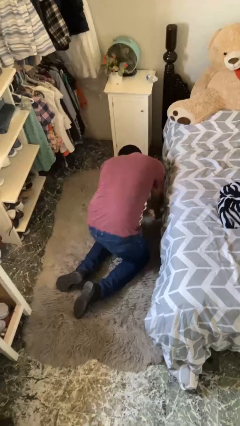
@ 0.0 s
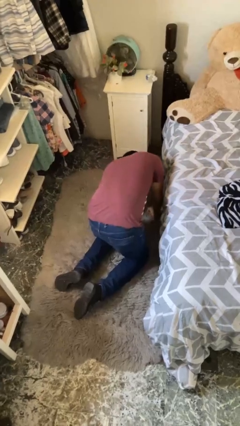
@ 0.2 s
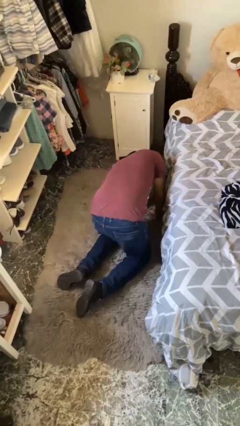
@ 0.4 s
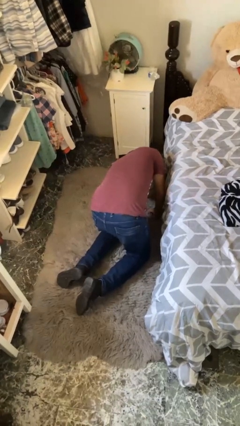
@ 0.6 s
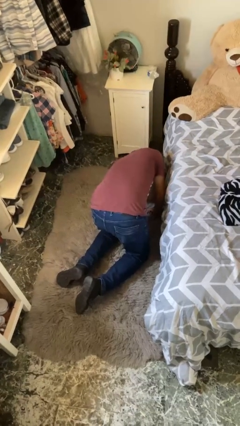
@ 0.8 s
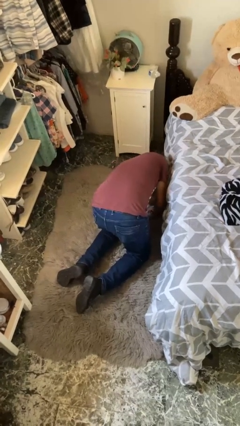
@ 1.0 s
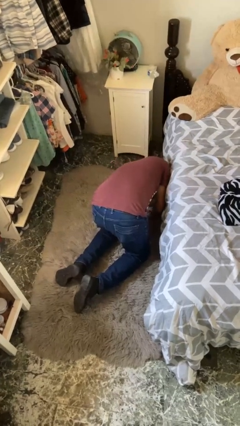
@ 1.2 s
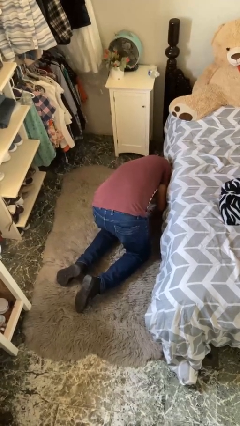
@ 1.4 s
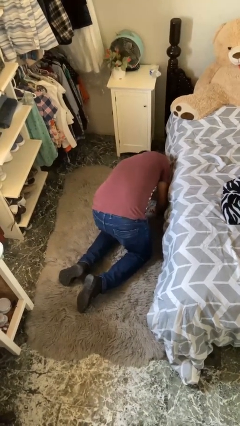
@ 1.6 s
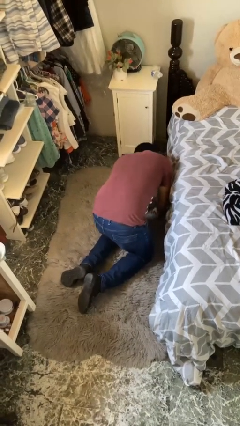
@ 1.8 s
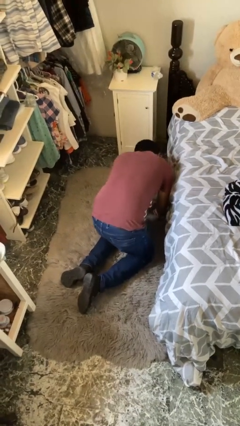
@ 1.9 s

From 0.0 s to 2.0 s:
person searches under bed

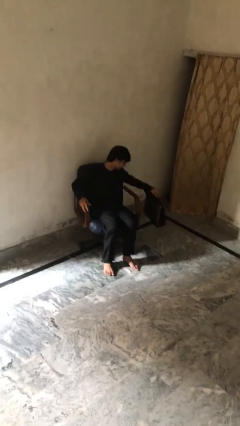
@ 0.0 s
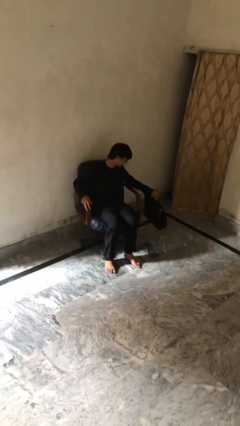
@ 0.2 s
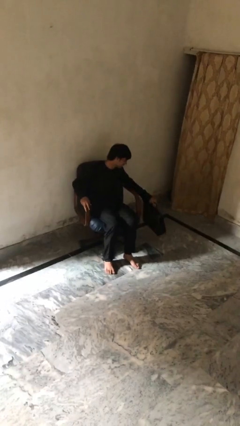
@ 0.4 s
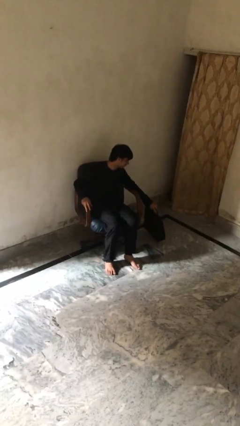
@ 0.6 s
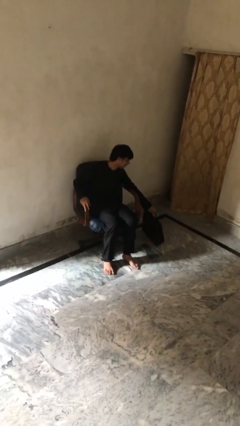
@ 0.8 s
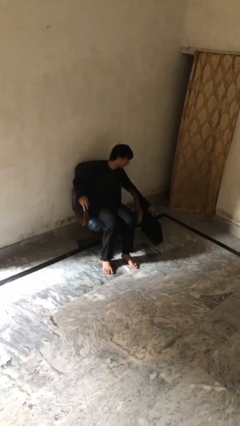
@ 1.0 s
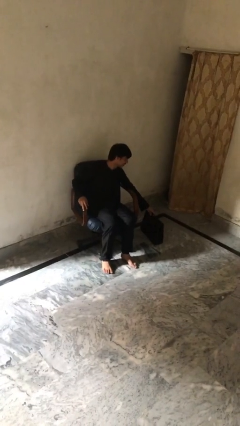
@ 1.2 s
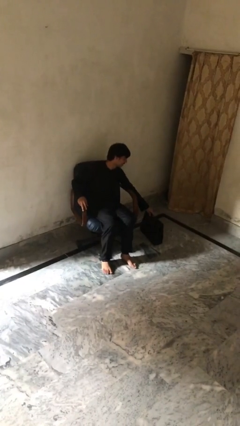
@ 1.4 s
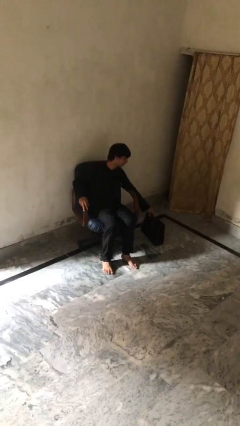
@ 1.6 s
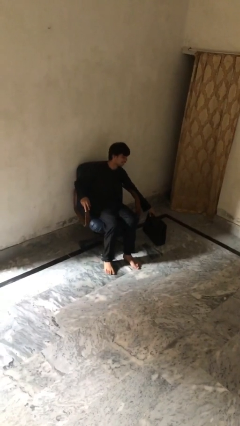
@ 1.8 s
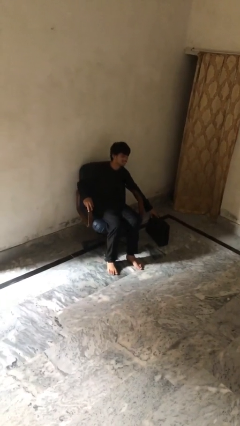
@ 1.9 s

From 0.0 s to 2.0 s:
person puts down object on floor

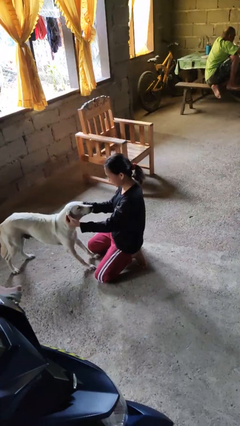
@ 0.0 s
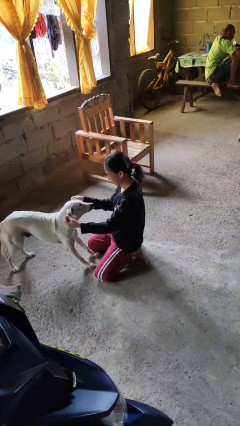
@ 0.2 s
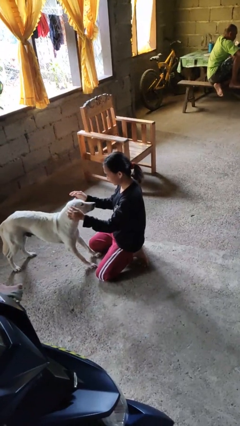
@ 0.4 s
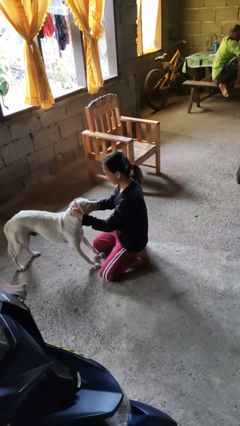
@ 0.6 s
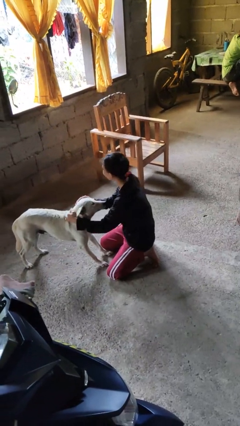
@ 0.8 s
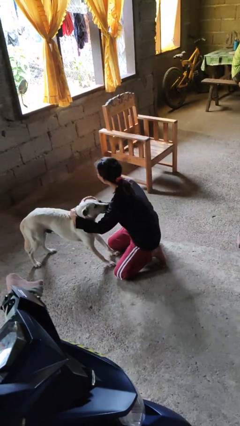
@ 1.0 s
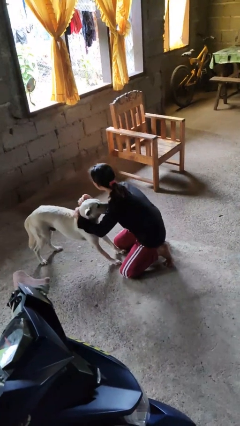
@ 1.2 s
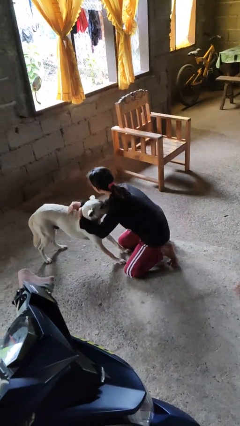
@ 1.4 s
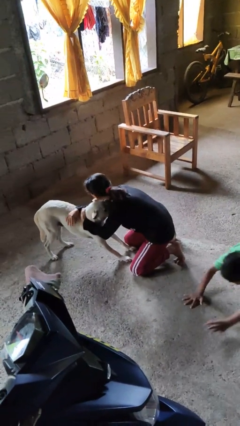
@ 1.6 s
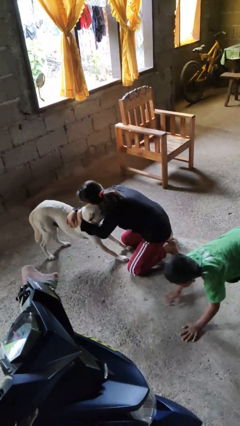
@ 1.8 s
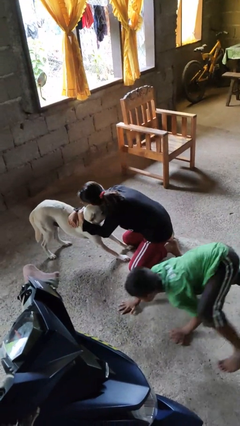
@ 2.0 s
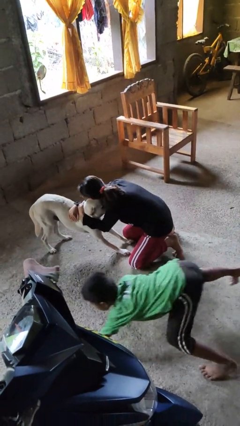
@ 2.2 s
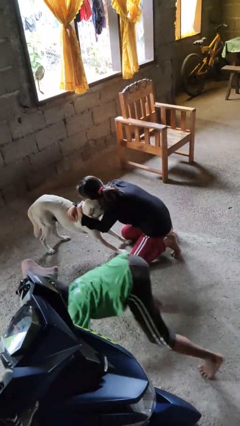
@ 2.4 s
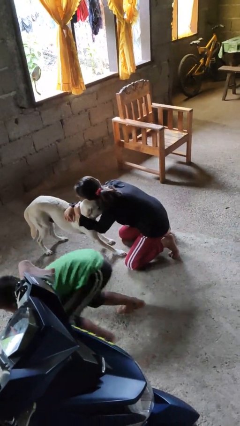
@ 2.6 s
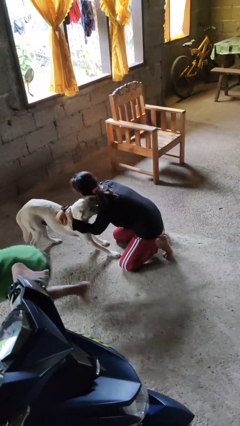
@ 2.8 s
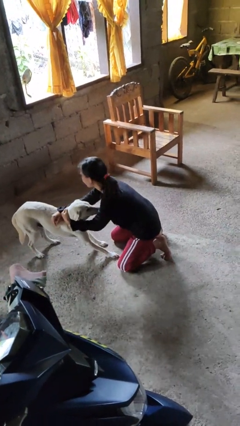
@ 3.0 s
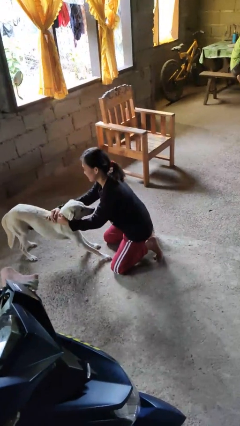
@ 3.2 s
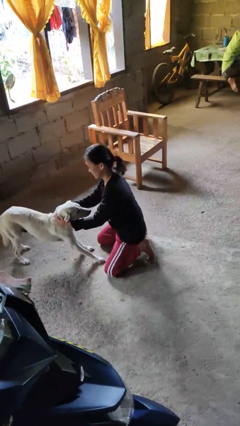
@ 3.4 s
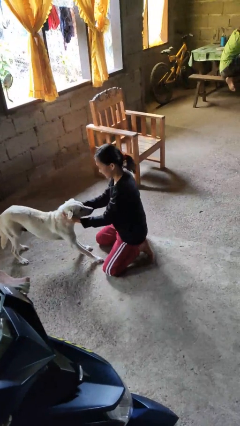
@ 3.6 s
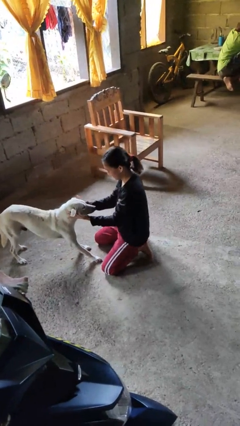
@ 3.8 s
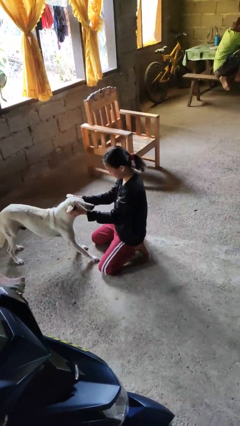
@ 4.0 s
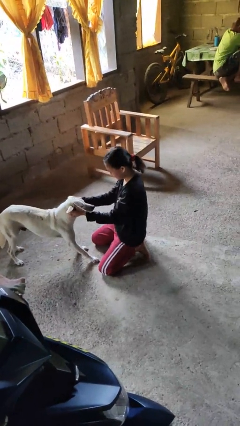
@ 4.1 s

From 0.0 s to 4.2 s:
person hugs dog

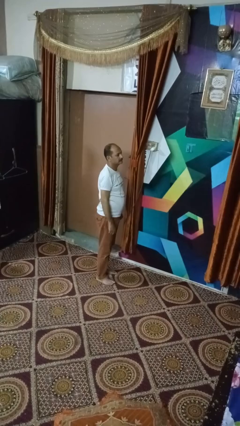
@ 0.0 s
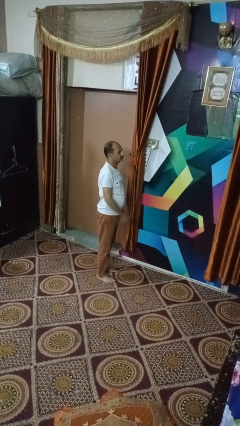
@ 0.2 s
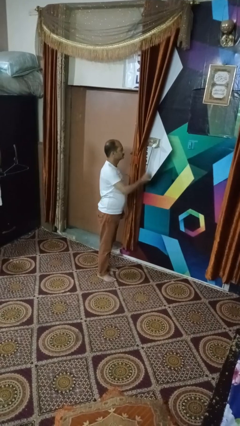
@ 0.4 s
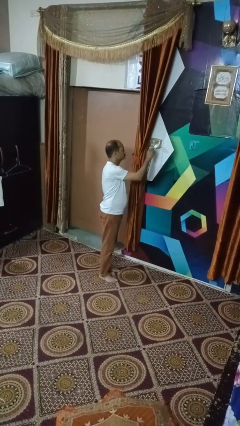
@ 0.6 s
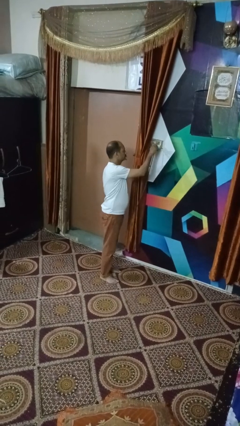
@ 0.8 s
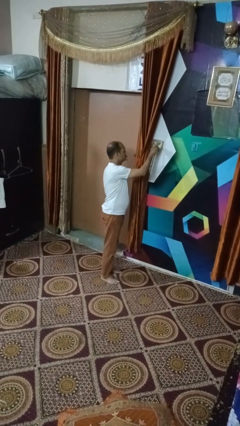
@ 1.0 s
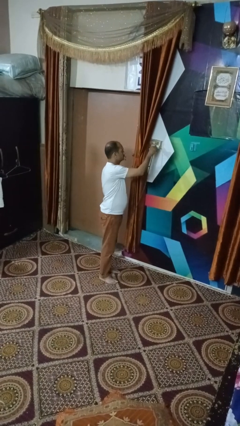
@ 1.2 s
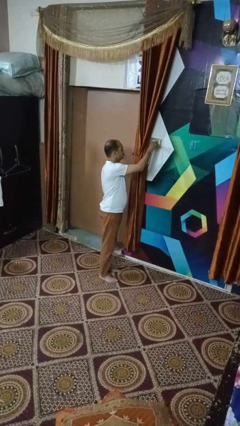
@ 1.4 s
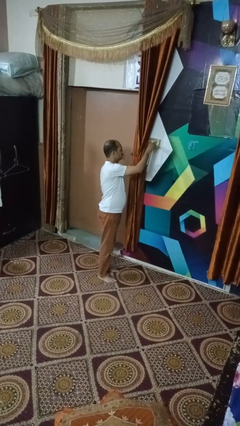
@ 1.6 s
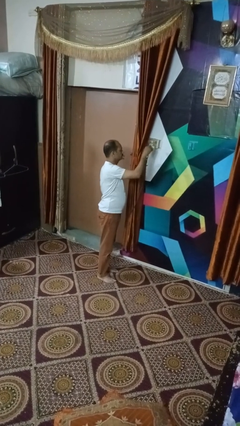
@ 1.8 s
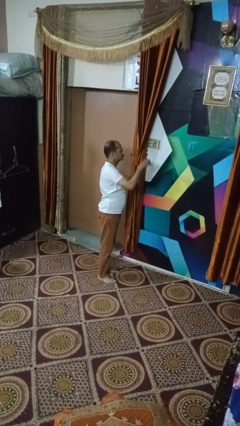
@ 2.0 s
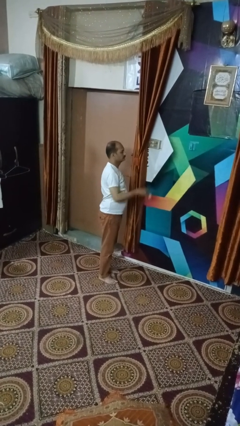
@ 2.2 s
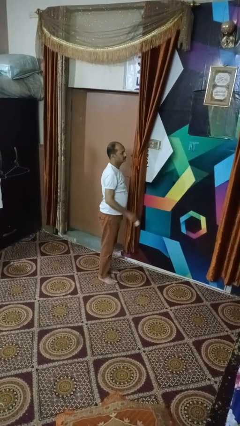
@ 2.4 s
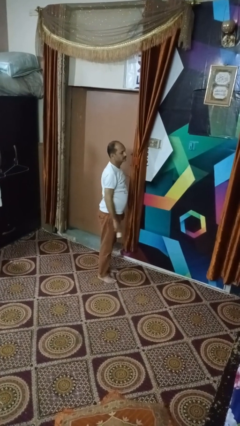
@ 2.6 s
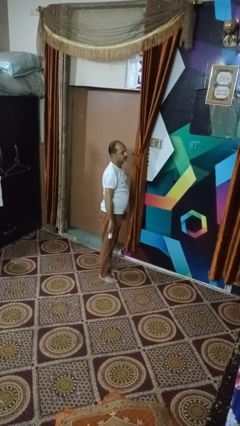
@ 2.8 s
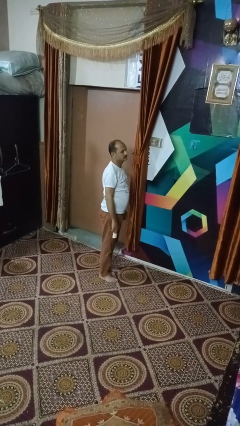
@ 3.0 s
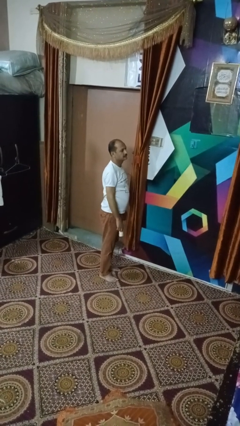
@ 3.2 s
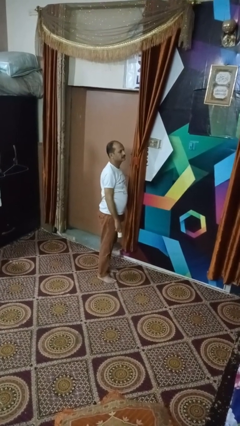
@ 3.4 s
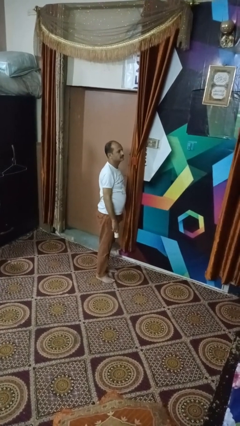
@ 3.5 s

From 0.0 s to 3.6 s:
person unplugs from electrical socket

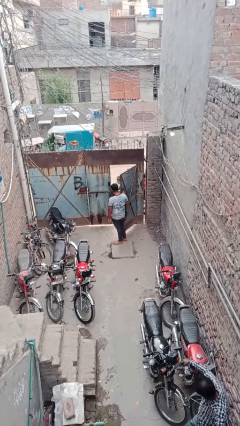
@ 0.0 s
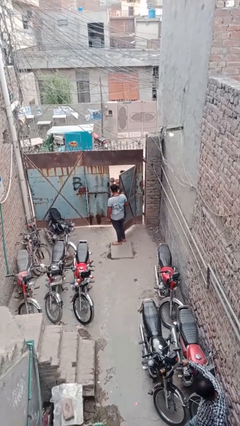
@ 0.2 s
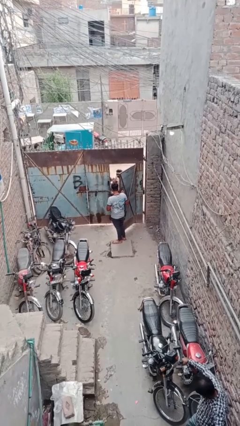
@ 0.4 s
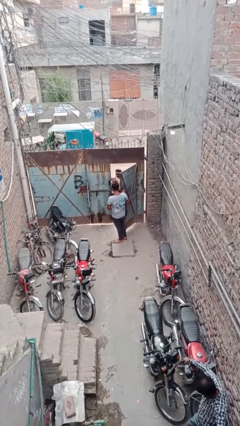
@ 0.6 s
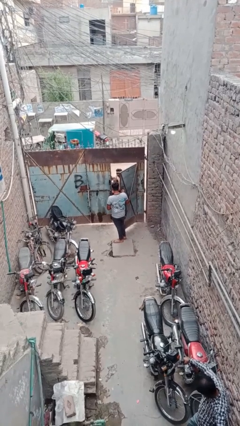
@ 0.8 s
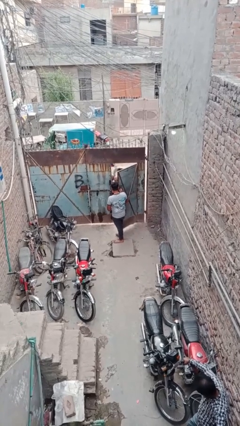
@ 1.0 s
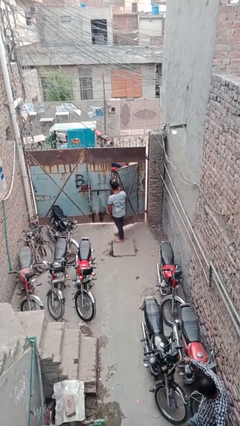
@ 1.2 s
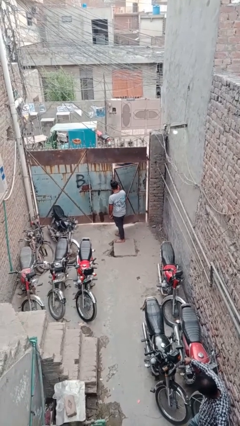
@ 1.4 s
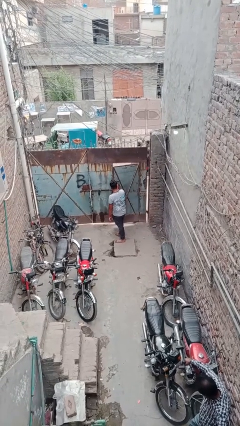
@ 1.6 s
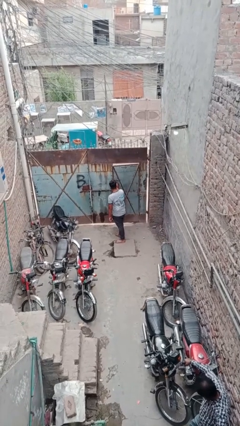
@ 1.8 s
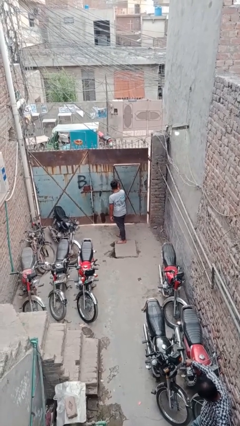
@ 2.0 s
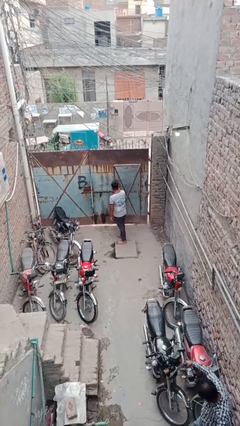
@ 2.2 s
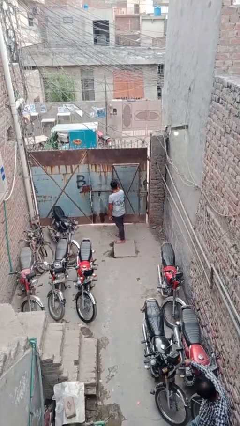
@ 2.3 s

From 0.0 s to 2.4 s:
person closes facility door

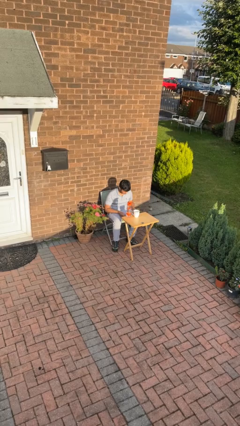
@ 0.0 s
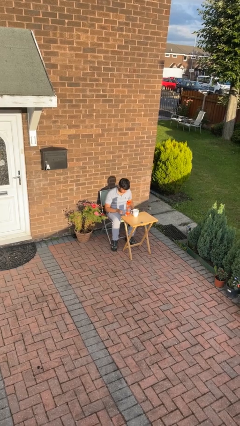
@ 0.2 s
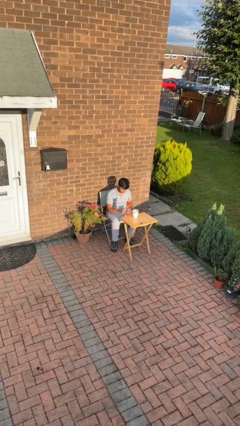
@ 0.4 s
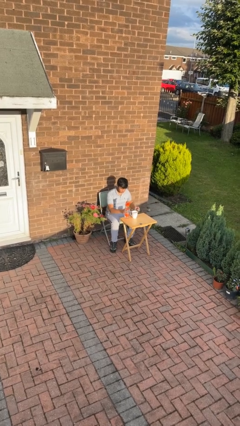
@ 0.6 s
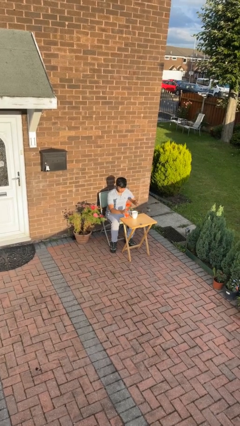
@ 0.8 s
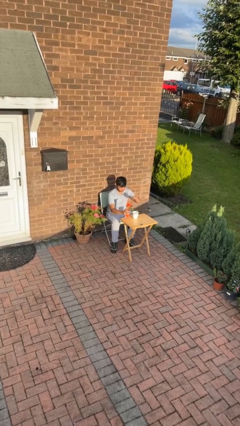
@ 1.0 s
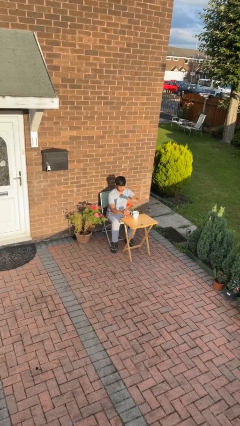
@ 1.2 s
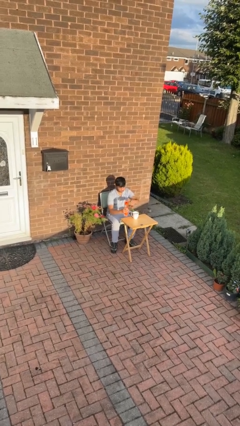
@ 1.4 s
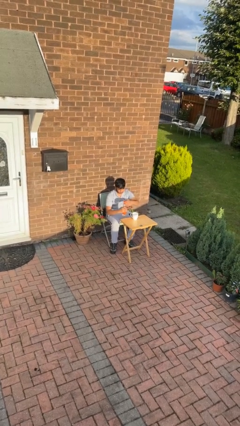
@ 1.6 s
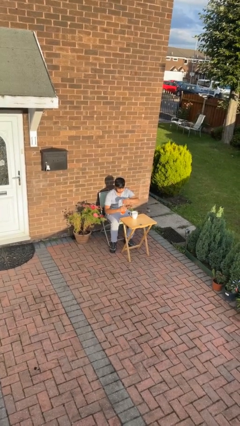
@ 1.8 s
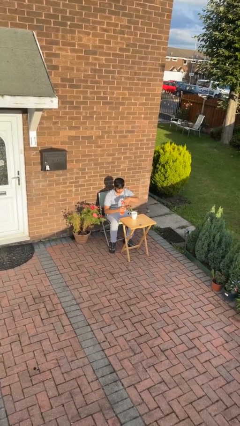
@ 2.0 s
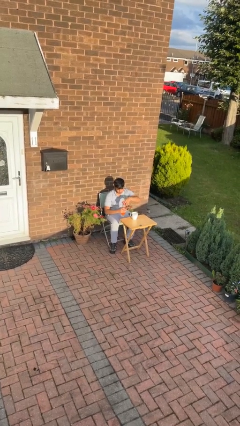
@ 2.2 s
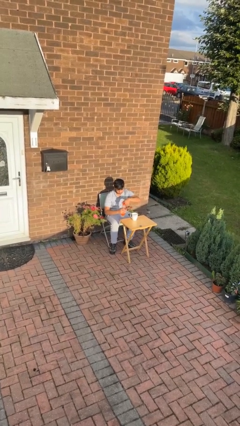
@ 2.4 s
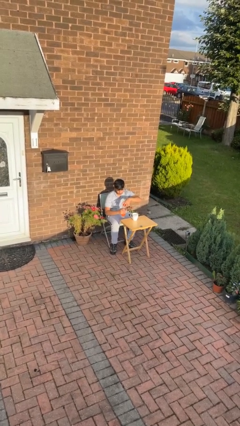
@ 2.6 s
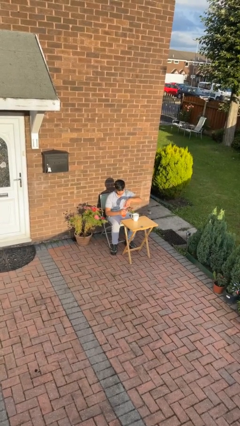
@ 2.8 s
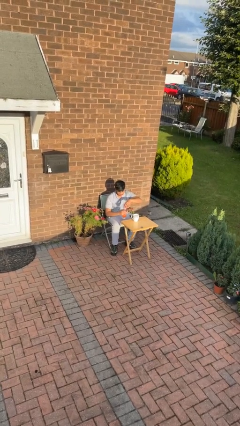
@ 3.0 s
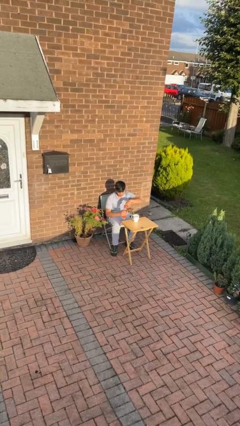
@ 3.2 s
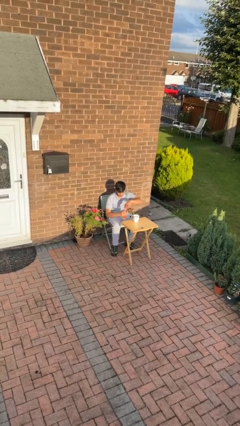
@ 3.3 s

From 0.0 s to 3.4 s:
person unscrews lid from bottle
